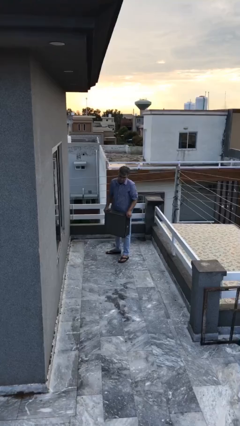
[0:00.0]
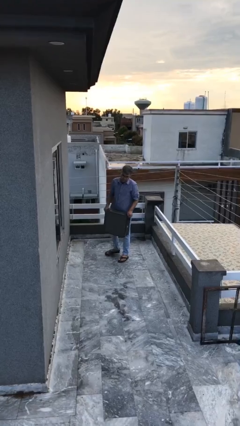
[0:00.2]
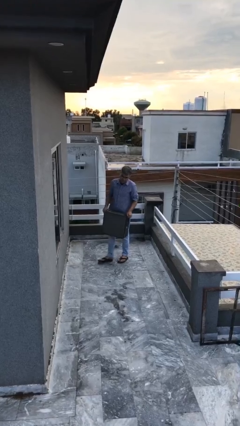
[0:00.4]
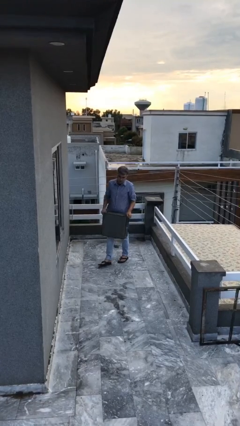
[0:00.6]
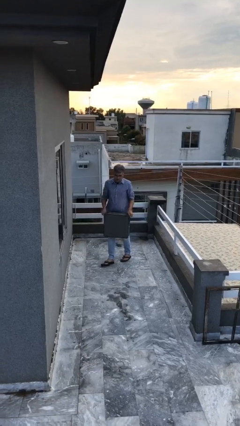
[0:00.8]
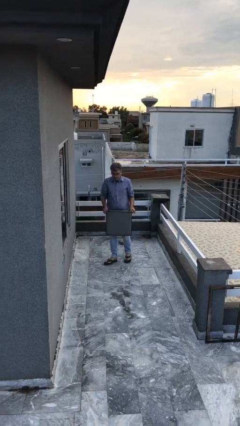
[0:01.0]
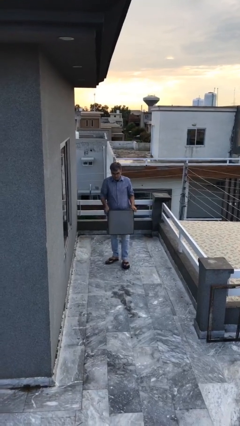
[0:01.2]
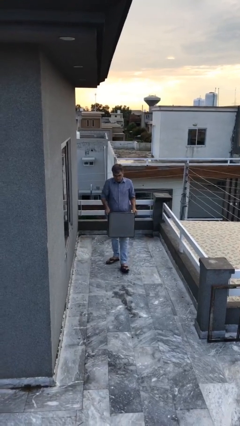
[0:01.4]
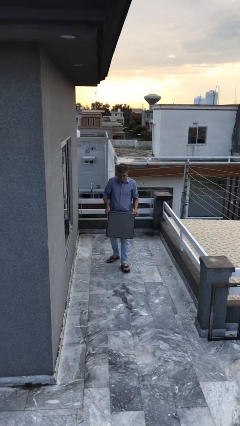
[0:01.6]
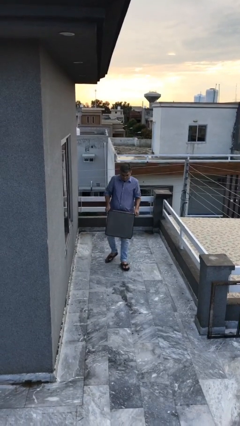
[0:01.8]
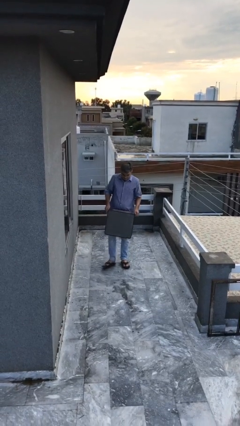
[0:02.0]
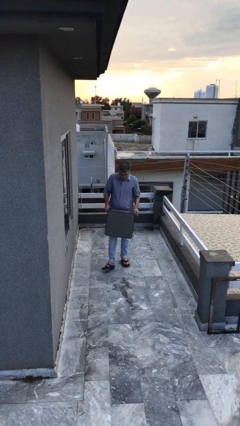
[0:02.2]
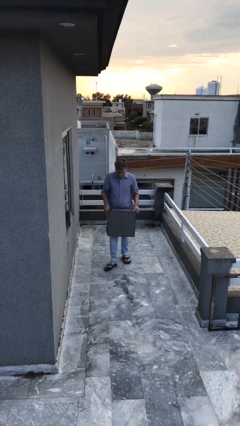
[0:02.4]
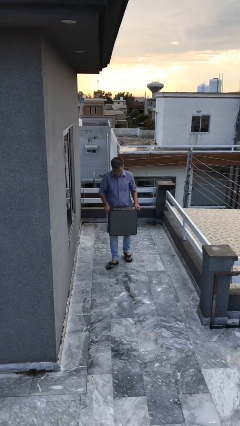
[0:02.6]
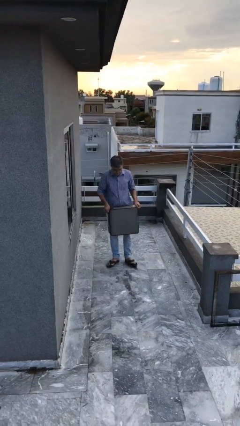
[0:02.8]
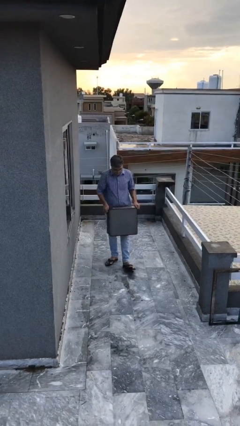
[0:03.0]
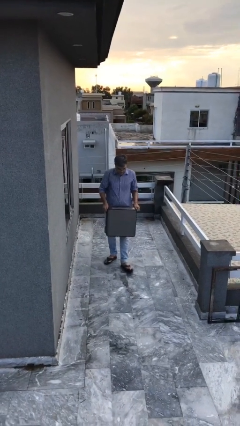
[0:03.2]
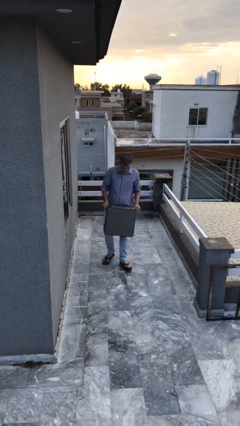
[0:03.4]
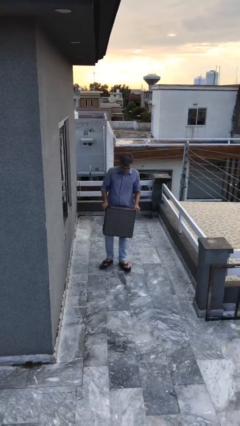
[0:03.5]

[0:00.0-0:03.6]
person carries heavy object

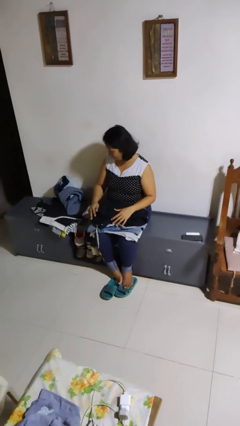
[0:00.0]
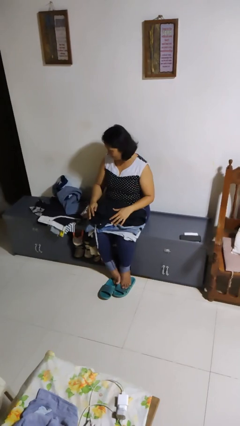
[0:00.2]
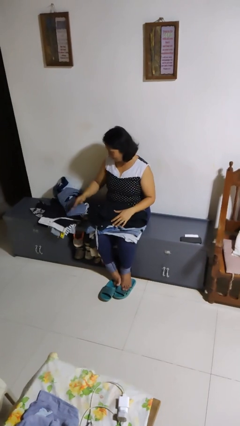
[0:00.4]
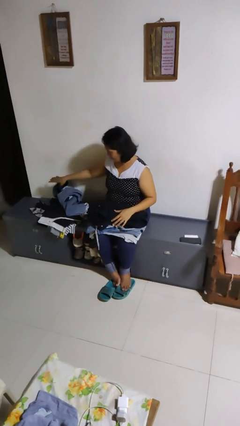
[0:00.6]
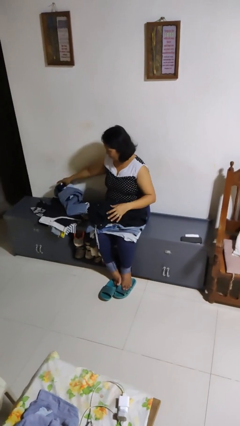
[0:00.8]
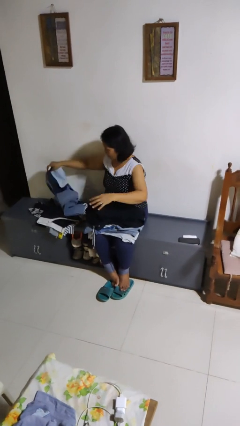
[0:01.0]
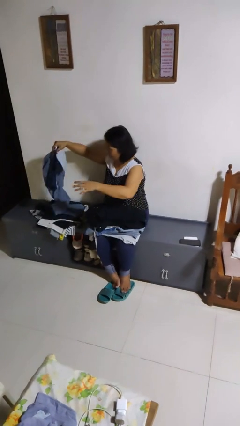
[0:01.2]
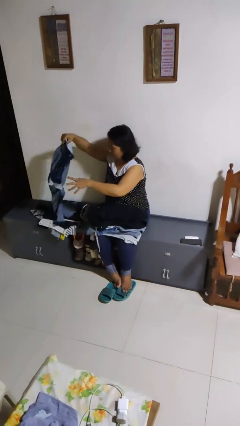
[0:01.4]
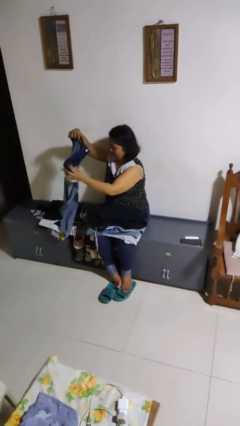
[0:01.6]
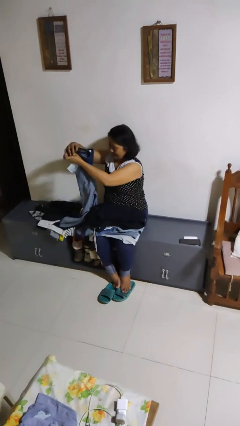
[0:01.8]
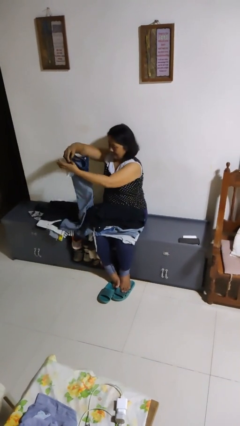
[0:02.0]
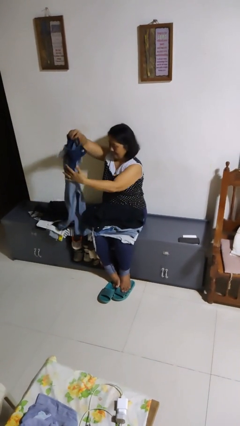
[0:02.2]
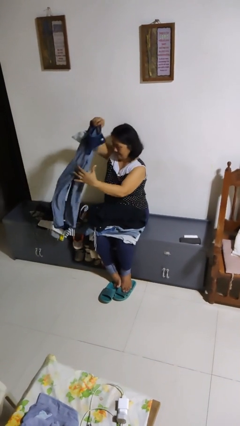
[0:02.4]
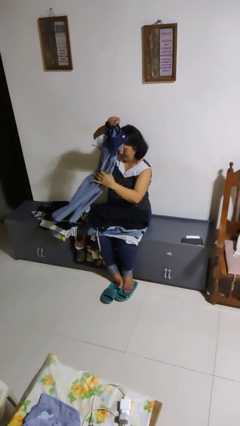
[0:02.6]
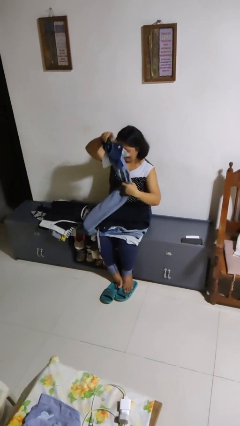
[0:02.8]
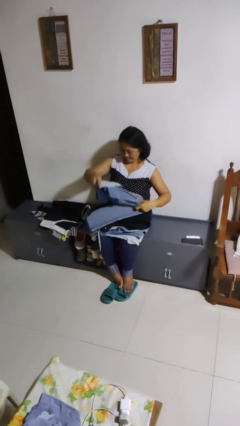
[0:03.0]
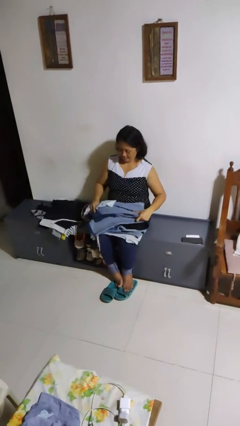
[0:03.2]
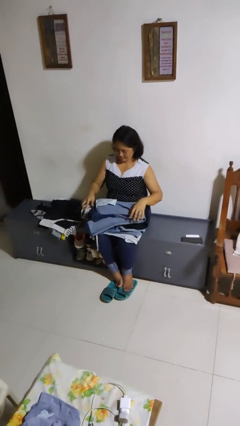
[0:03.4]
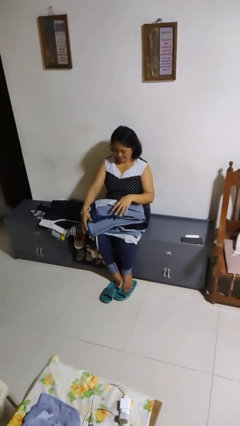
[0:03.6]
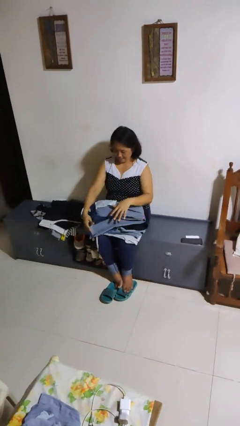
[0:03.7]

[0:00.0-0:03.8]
person folds pants

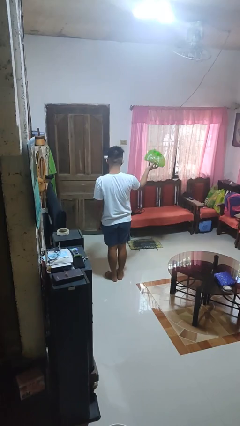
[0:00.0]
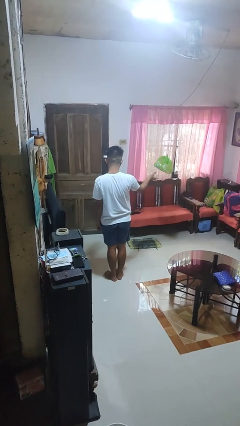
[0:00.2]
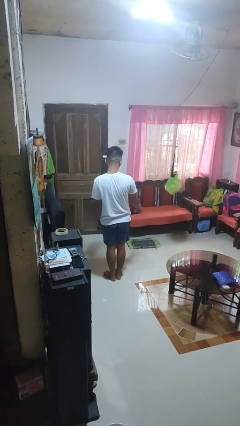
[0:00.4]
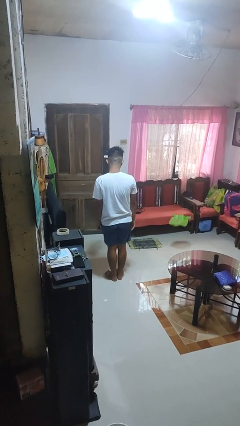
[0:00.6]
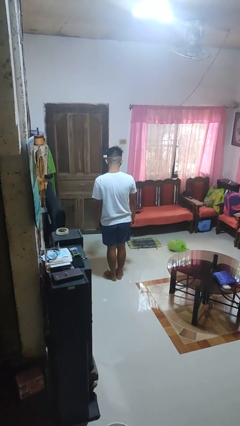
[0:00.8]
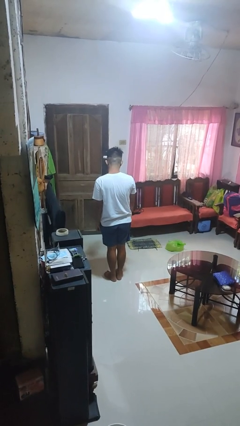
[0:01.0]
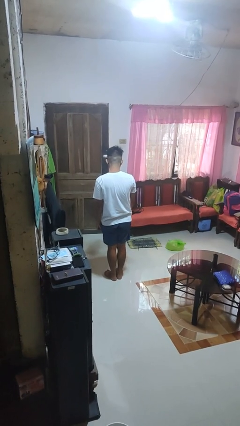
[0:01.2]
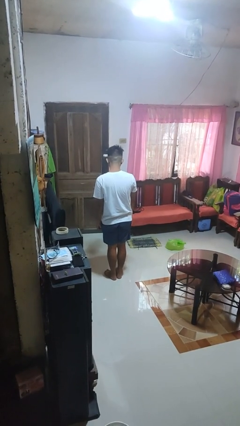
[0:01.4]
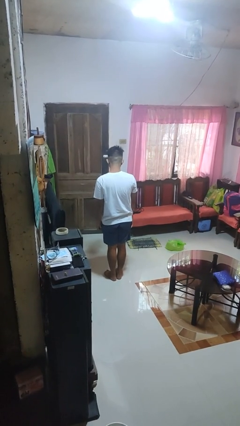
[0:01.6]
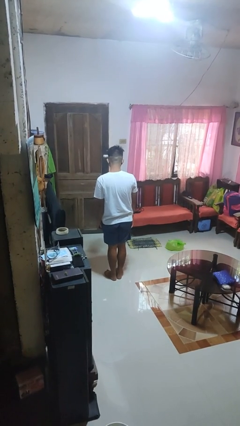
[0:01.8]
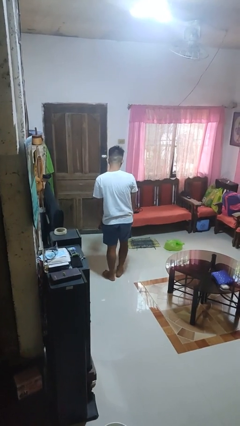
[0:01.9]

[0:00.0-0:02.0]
person throws object to ground

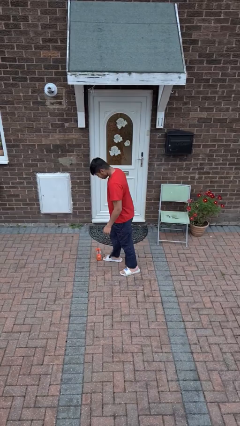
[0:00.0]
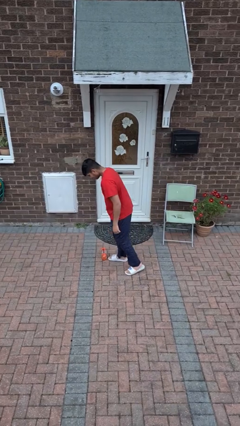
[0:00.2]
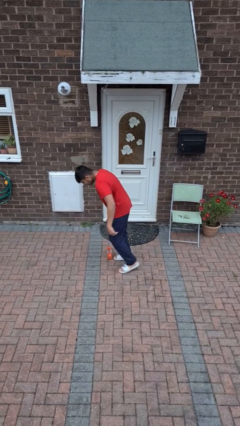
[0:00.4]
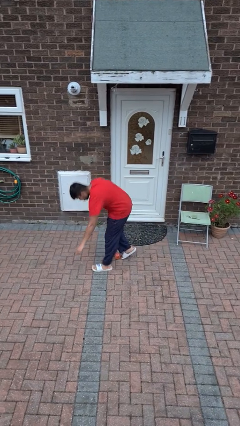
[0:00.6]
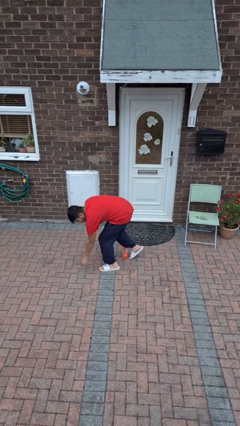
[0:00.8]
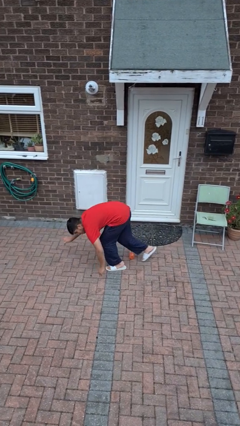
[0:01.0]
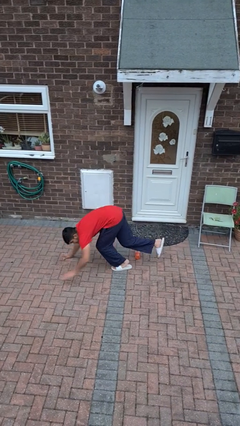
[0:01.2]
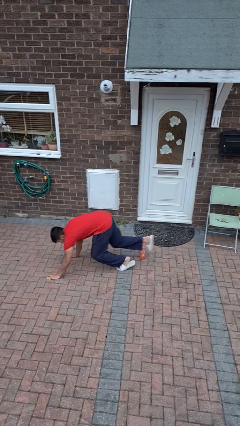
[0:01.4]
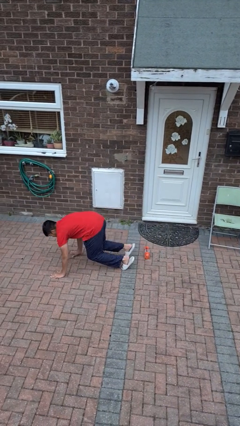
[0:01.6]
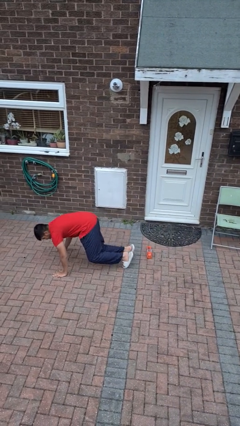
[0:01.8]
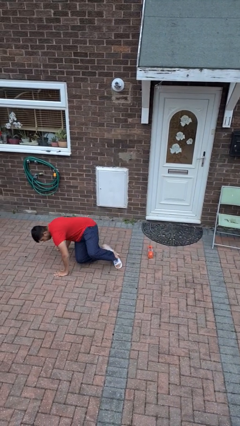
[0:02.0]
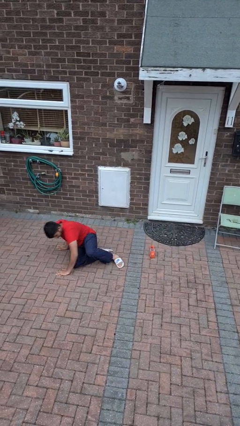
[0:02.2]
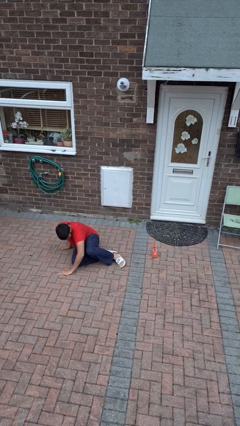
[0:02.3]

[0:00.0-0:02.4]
person trips on object on floor

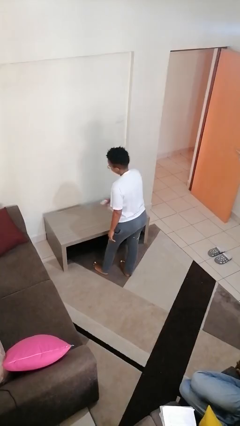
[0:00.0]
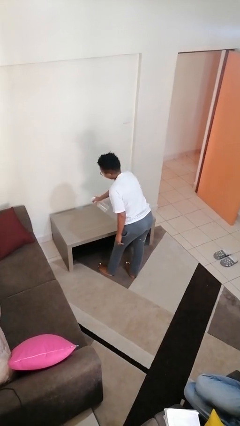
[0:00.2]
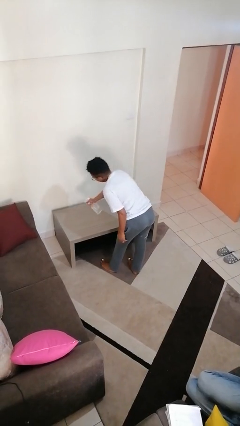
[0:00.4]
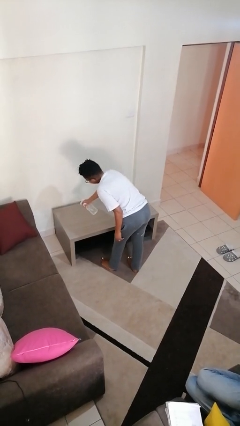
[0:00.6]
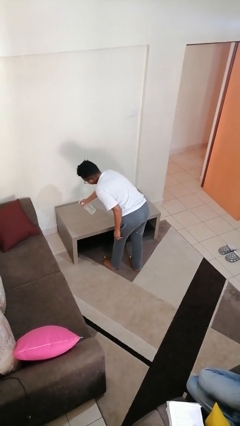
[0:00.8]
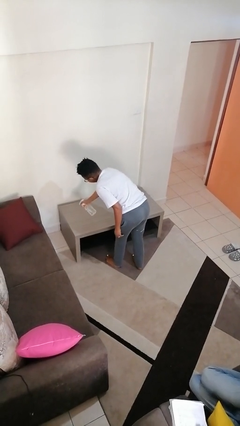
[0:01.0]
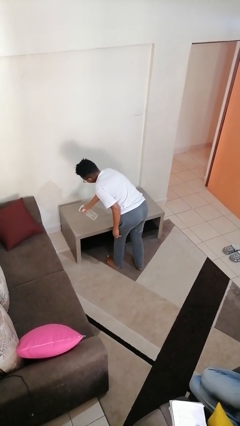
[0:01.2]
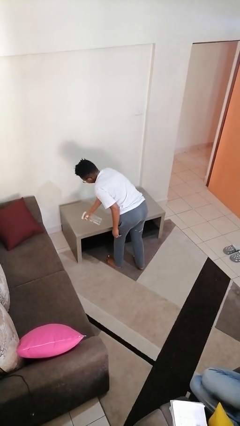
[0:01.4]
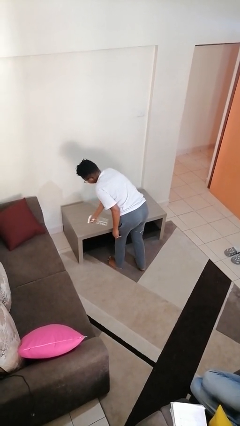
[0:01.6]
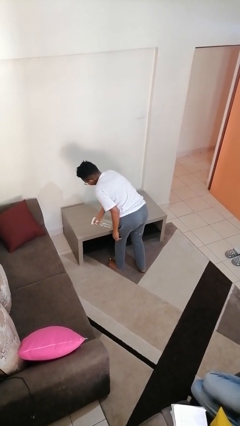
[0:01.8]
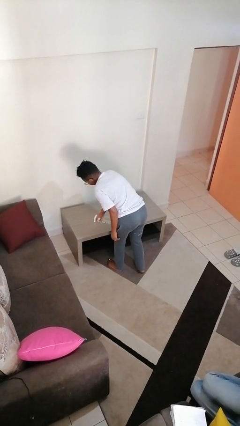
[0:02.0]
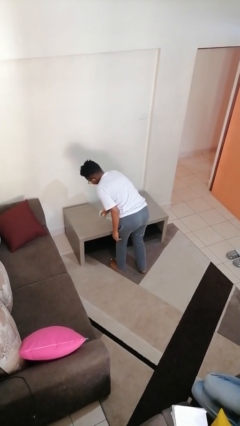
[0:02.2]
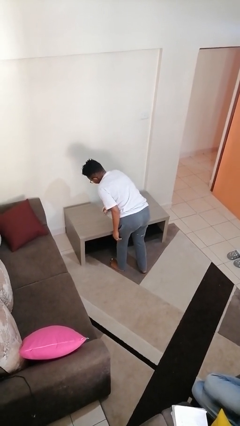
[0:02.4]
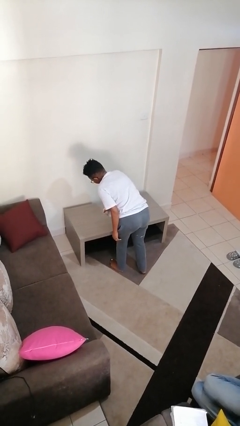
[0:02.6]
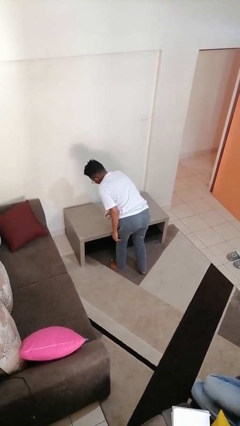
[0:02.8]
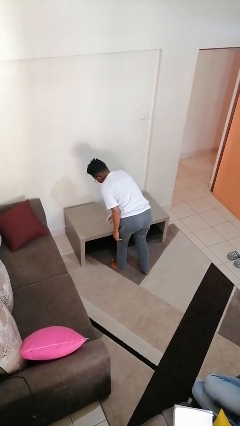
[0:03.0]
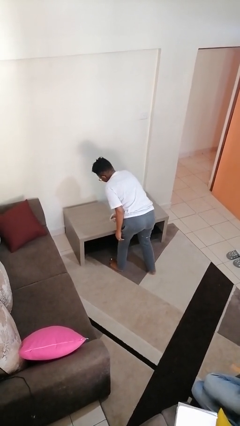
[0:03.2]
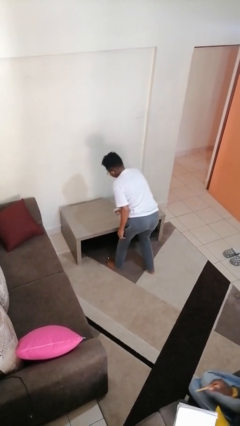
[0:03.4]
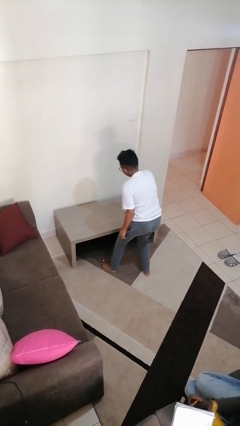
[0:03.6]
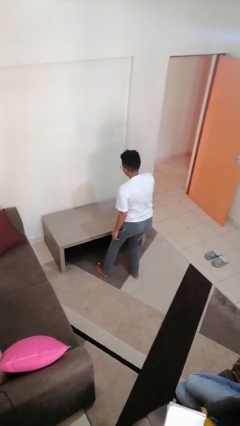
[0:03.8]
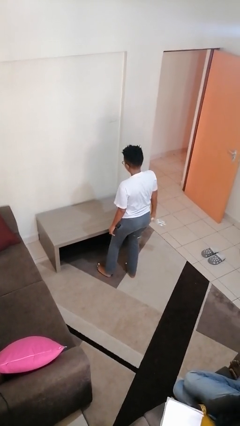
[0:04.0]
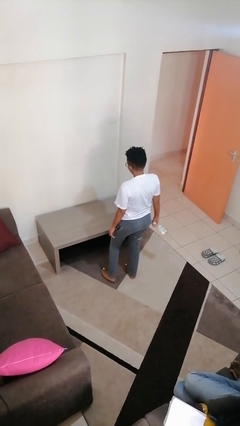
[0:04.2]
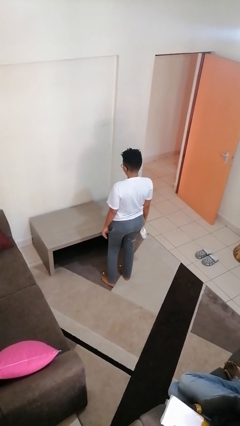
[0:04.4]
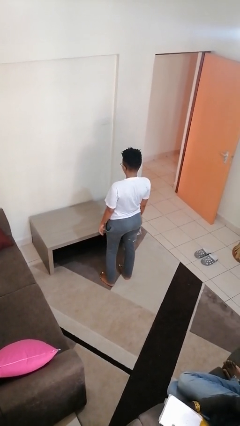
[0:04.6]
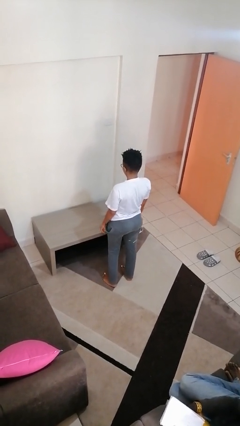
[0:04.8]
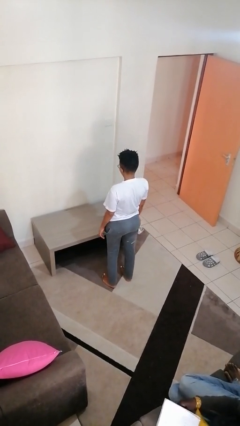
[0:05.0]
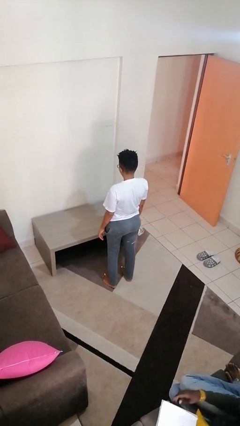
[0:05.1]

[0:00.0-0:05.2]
person sprays from bottle

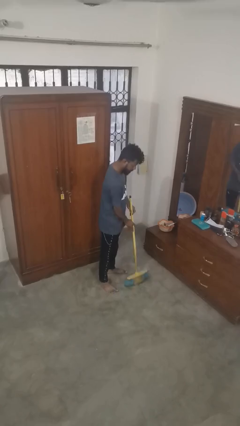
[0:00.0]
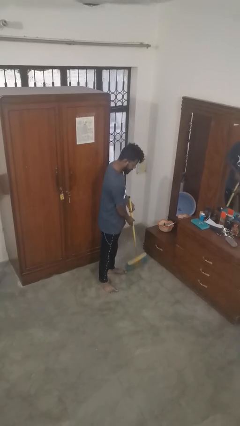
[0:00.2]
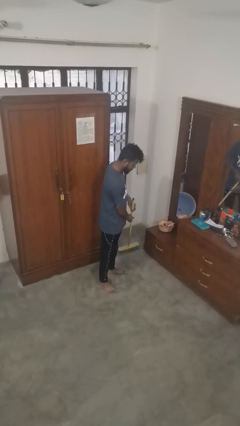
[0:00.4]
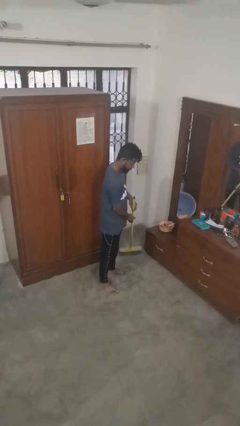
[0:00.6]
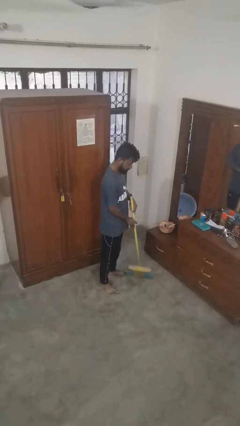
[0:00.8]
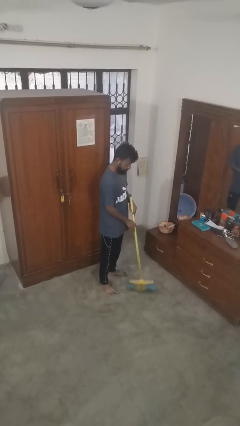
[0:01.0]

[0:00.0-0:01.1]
person sweeps floor
